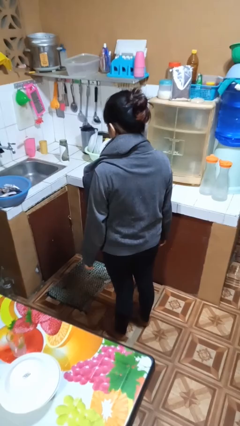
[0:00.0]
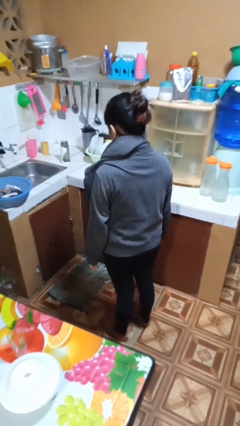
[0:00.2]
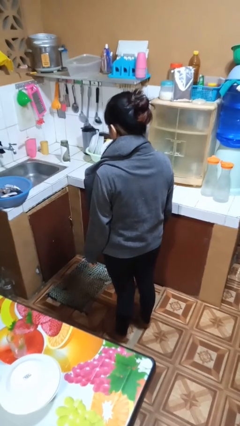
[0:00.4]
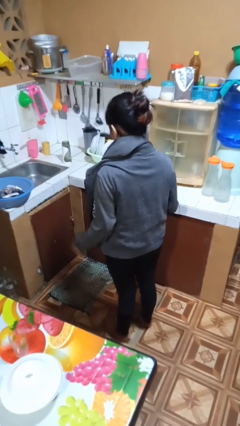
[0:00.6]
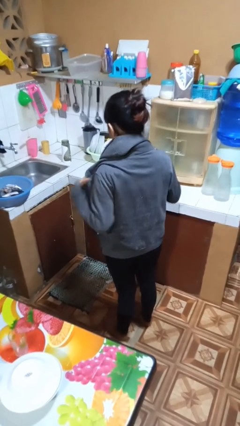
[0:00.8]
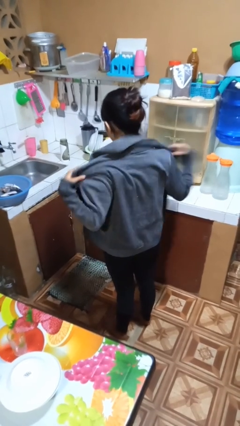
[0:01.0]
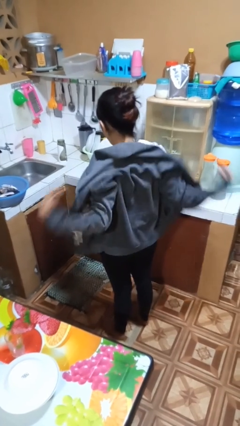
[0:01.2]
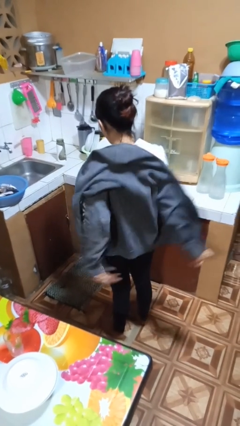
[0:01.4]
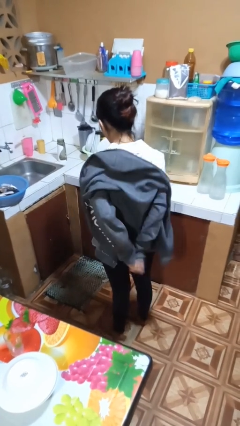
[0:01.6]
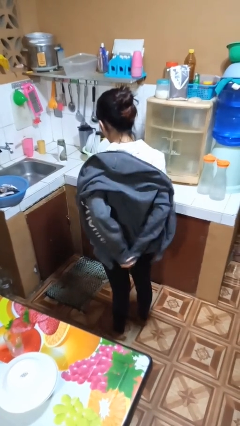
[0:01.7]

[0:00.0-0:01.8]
person takes off jacket

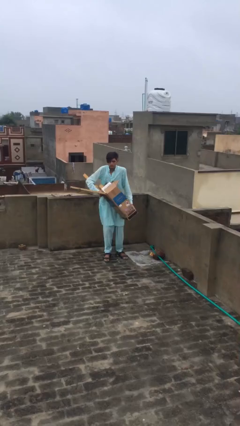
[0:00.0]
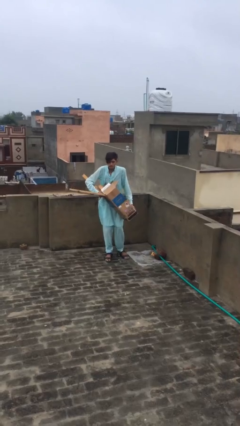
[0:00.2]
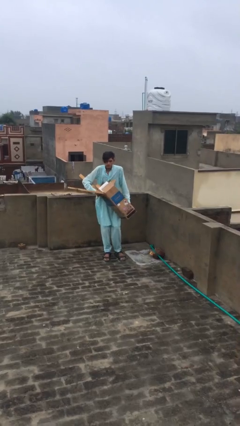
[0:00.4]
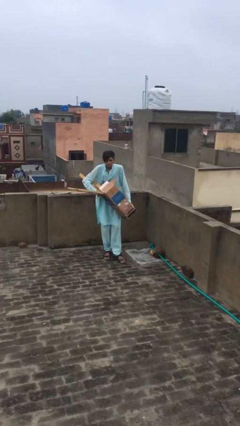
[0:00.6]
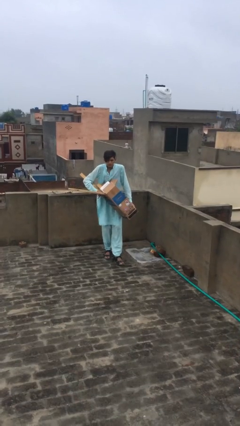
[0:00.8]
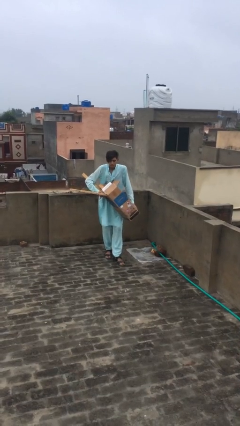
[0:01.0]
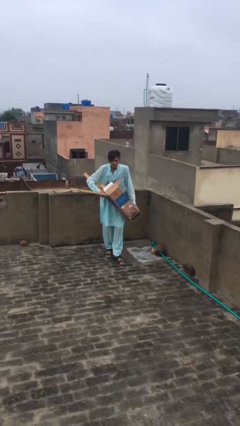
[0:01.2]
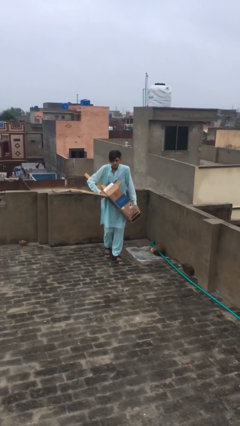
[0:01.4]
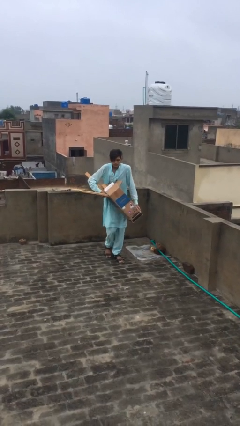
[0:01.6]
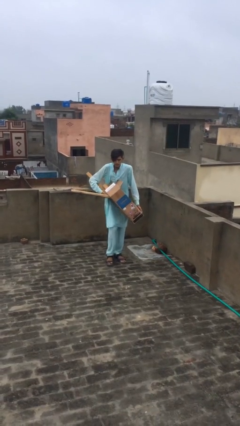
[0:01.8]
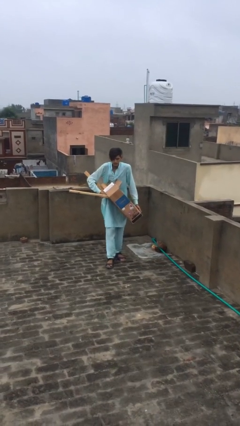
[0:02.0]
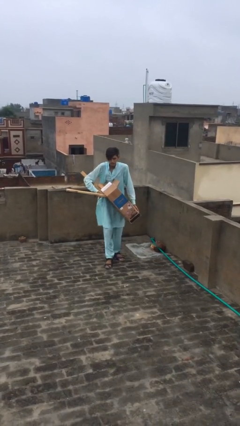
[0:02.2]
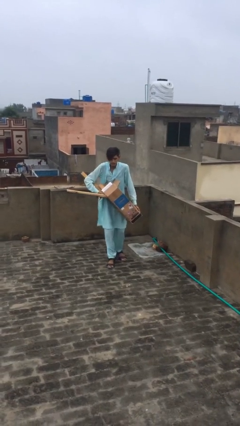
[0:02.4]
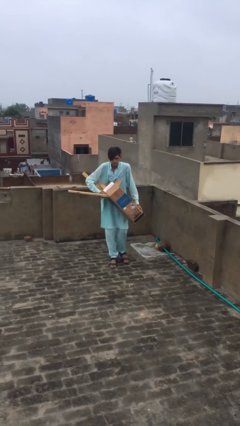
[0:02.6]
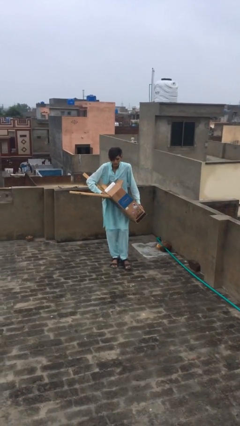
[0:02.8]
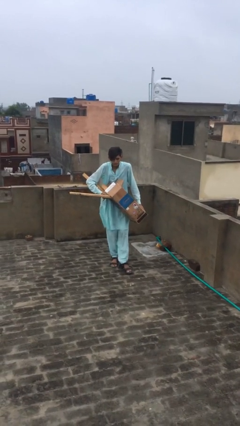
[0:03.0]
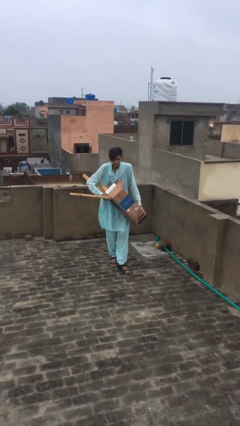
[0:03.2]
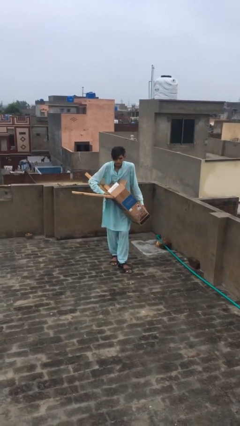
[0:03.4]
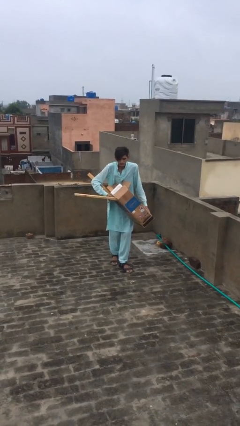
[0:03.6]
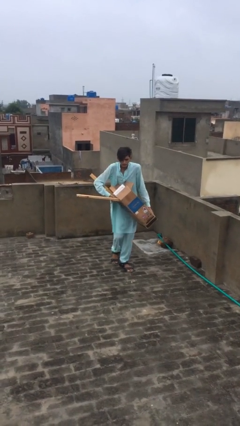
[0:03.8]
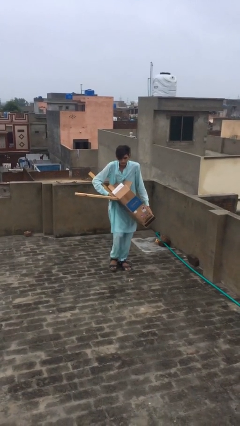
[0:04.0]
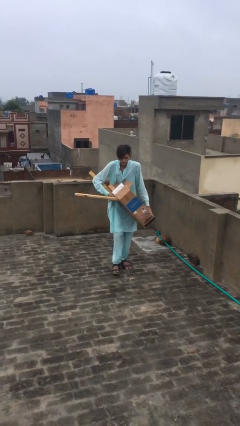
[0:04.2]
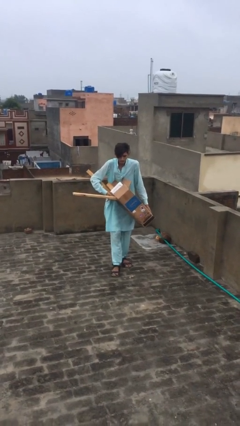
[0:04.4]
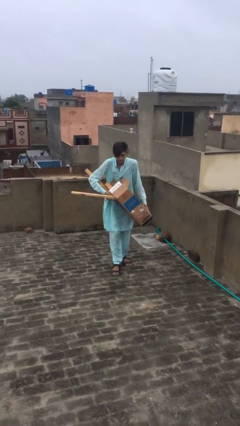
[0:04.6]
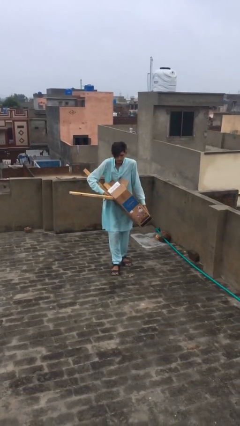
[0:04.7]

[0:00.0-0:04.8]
person carries heavy object

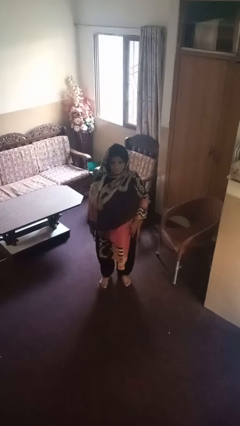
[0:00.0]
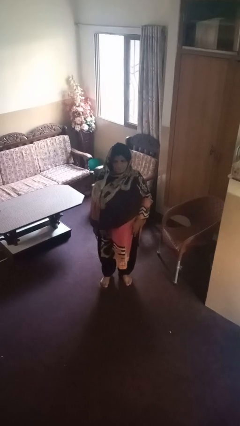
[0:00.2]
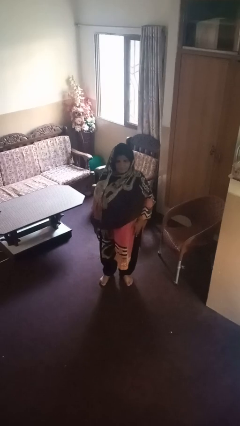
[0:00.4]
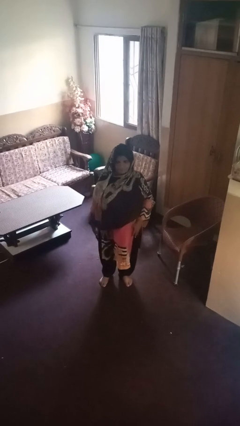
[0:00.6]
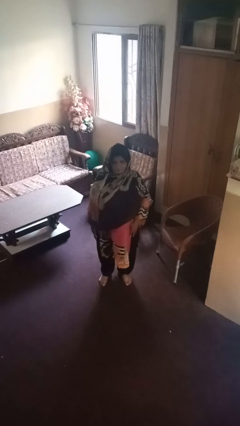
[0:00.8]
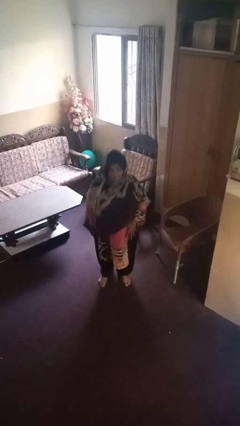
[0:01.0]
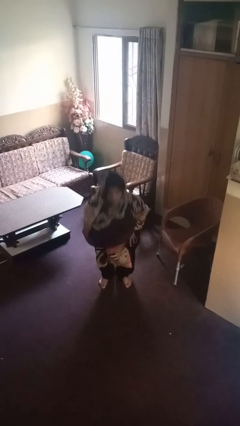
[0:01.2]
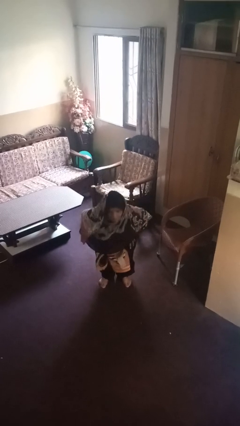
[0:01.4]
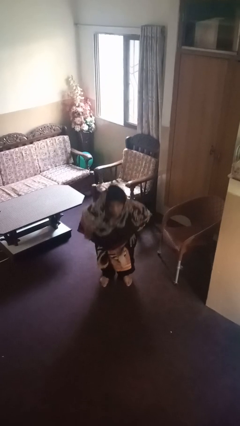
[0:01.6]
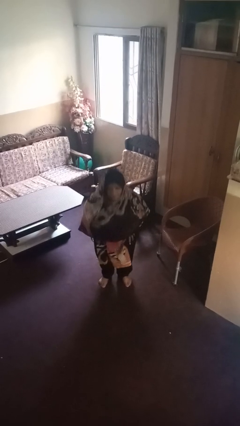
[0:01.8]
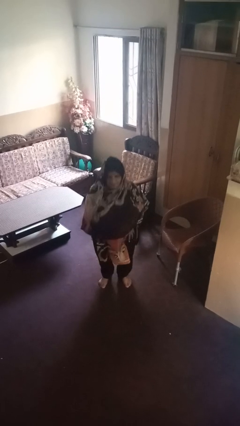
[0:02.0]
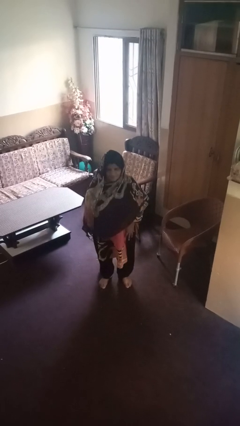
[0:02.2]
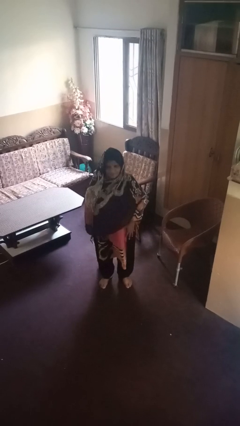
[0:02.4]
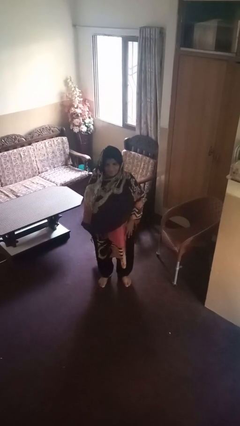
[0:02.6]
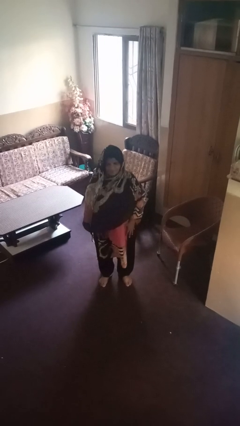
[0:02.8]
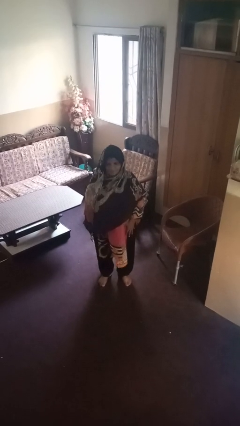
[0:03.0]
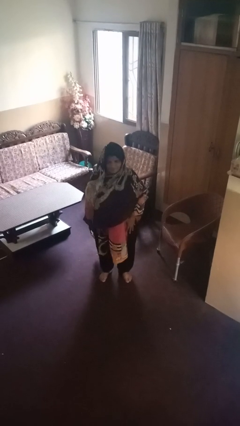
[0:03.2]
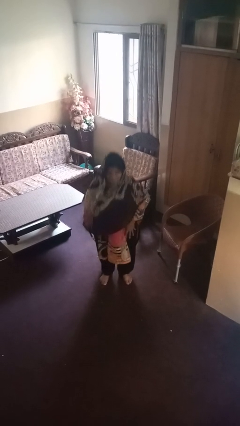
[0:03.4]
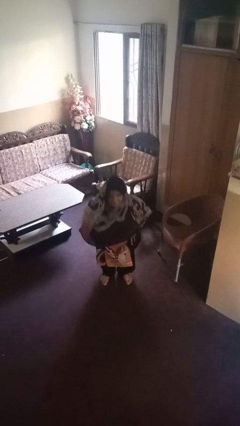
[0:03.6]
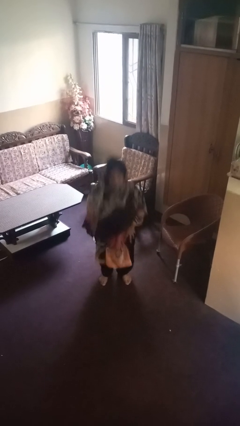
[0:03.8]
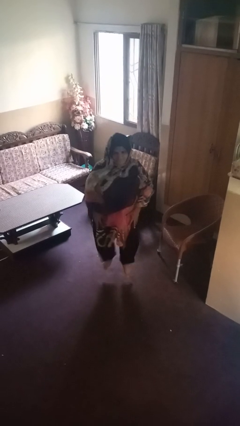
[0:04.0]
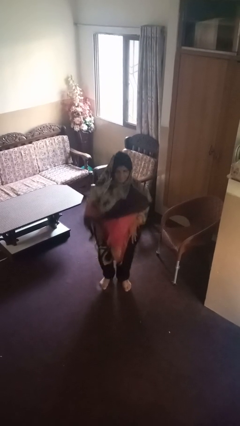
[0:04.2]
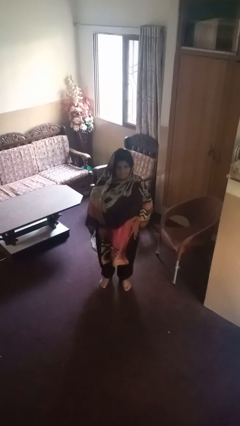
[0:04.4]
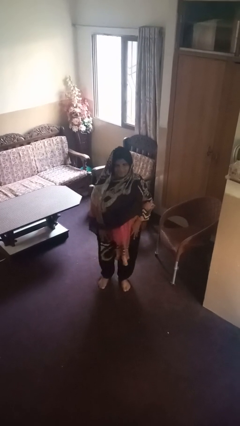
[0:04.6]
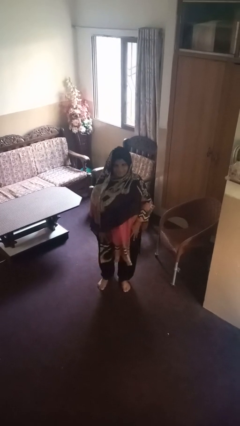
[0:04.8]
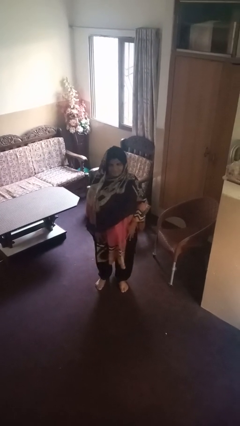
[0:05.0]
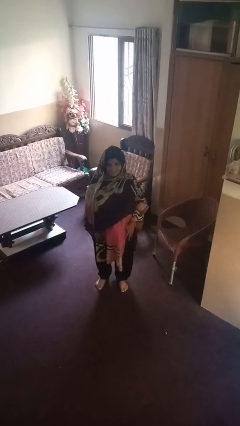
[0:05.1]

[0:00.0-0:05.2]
person jumps

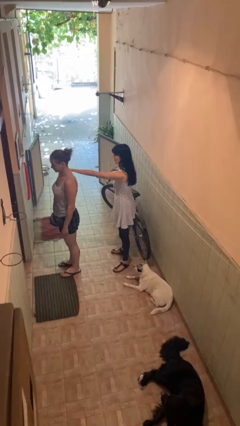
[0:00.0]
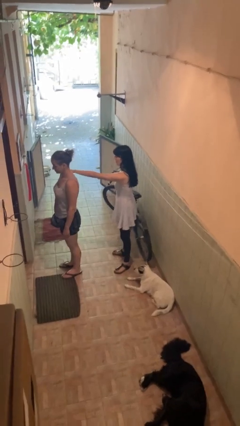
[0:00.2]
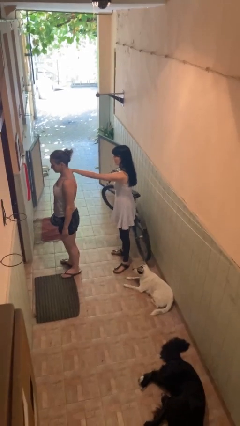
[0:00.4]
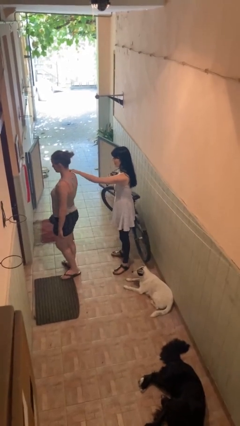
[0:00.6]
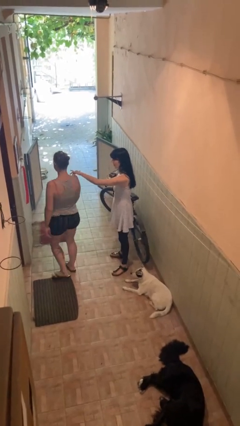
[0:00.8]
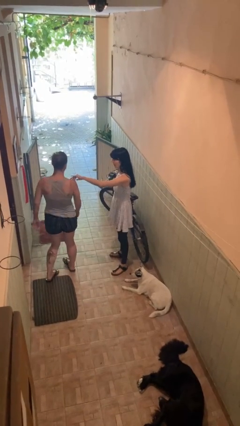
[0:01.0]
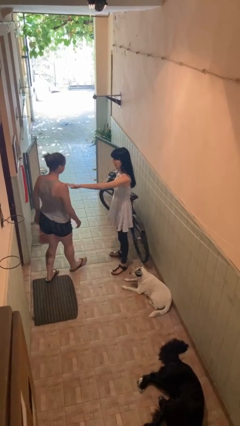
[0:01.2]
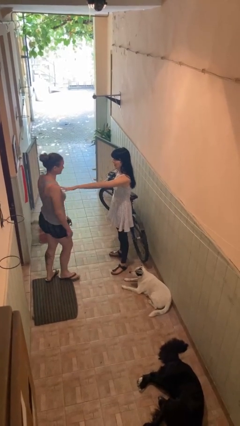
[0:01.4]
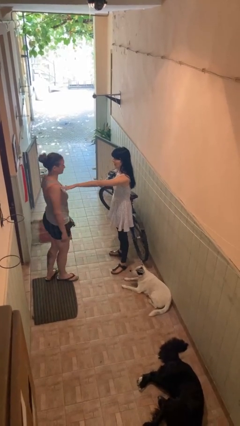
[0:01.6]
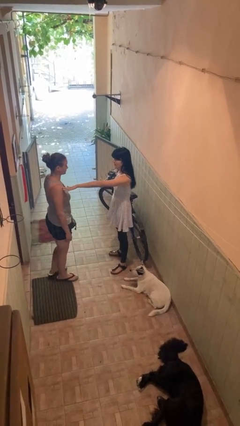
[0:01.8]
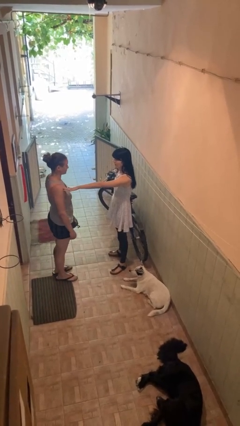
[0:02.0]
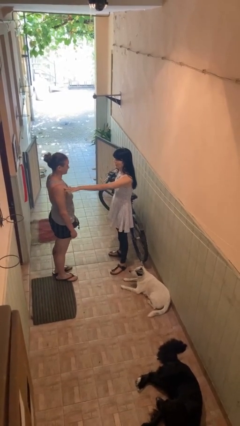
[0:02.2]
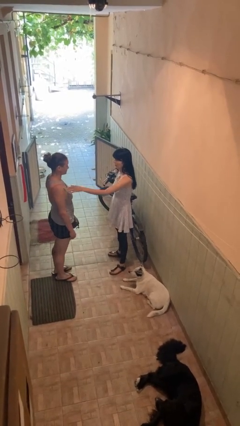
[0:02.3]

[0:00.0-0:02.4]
person spins person around

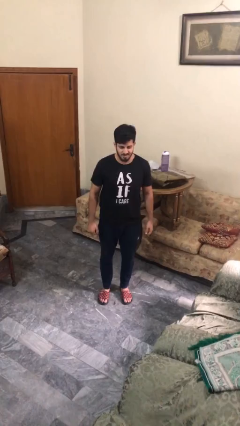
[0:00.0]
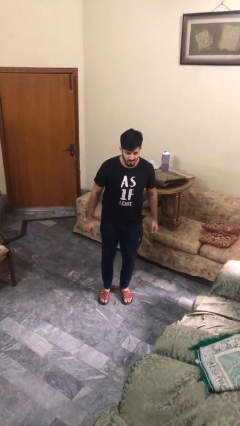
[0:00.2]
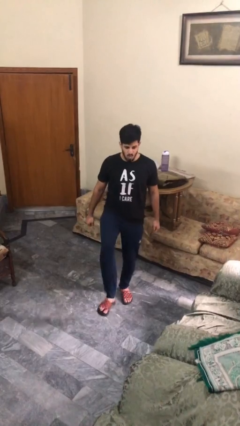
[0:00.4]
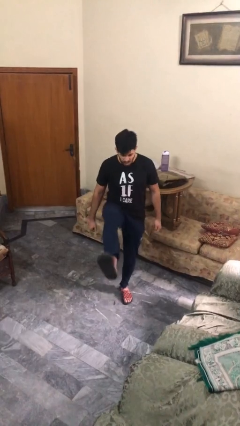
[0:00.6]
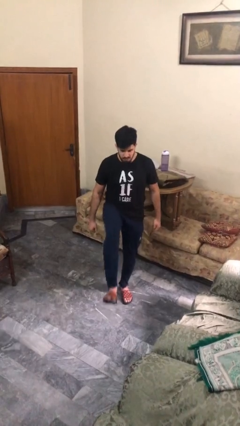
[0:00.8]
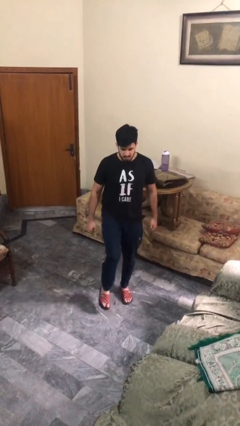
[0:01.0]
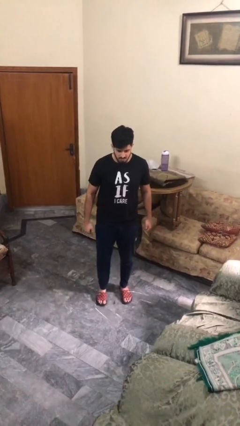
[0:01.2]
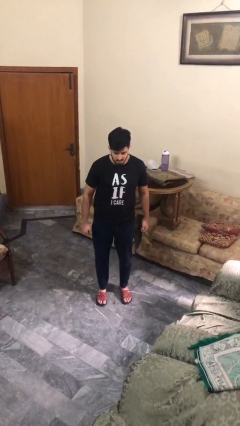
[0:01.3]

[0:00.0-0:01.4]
person karate kicks

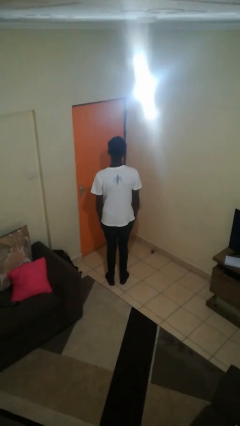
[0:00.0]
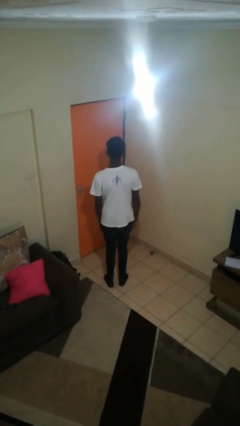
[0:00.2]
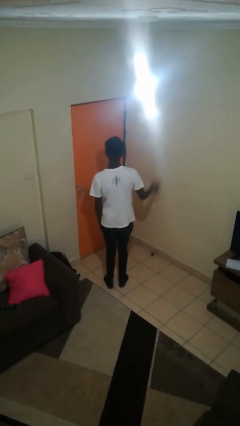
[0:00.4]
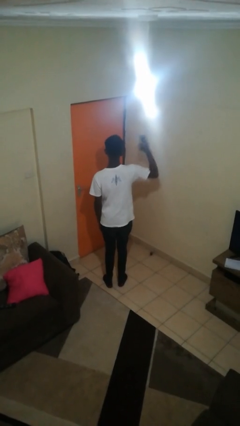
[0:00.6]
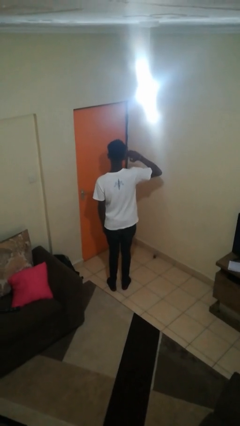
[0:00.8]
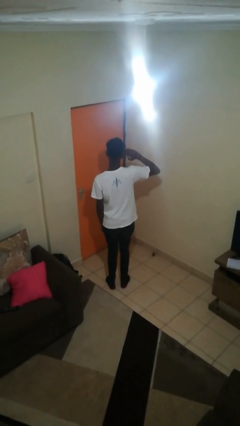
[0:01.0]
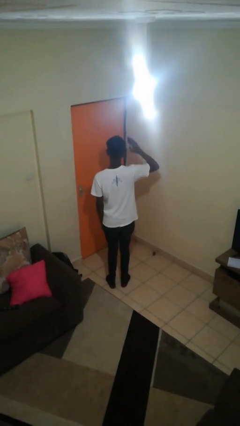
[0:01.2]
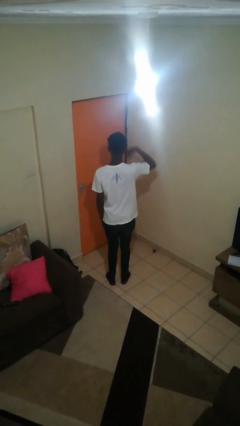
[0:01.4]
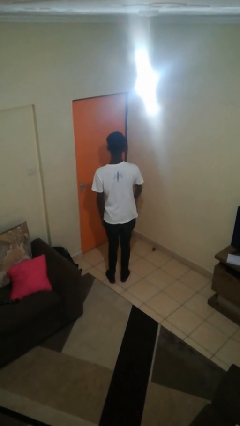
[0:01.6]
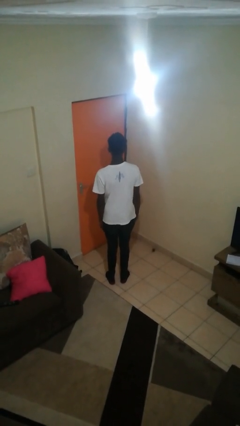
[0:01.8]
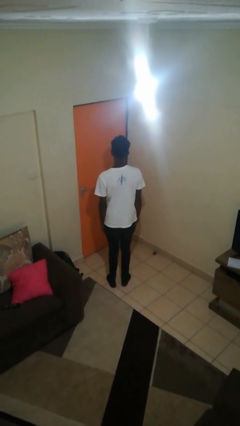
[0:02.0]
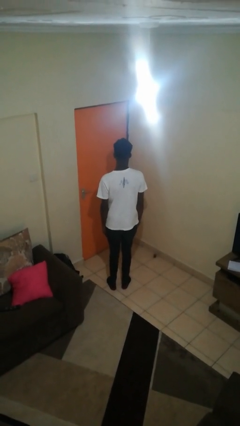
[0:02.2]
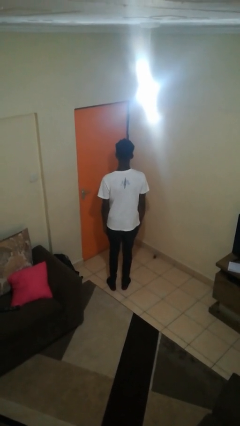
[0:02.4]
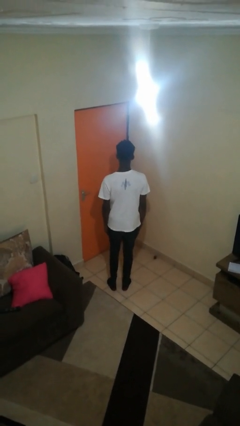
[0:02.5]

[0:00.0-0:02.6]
person salutes
